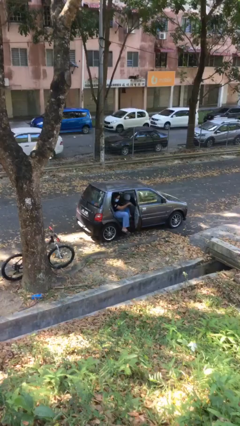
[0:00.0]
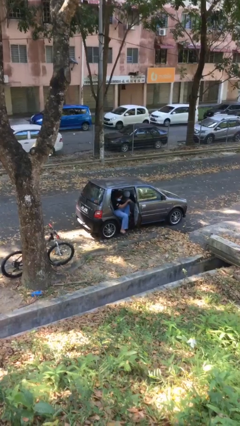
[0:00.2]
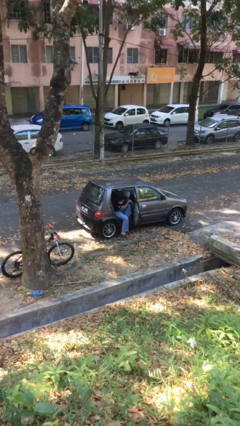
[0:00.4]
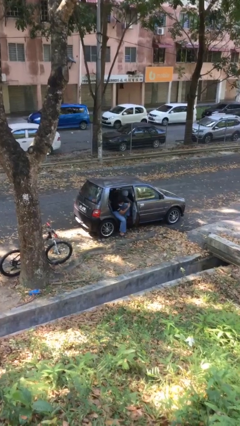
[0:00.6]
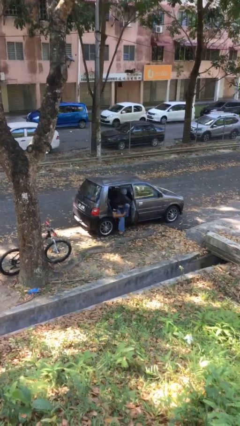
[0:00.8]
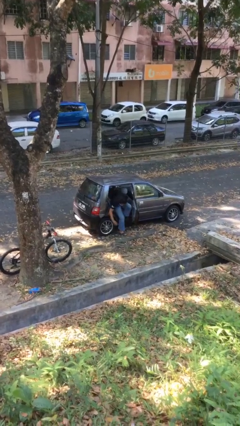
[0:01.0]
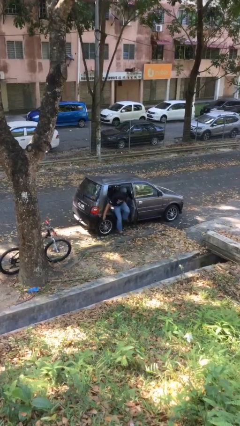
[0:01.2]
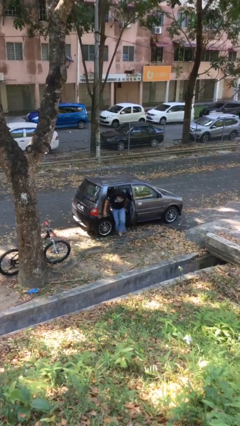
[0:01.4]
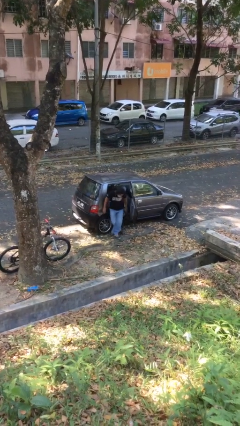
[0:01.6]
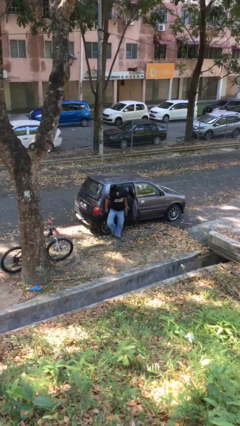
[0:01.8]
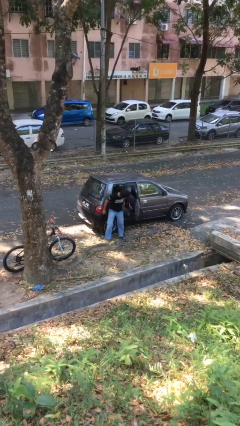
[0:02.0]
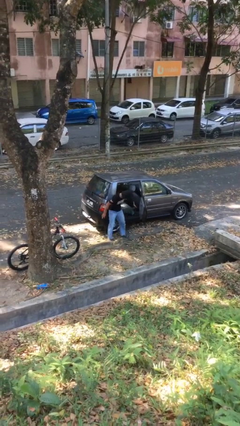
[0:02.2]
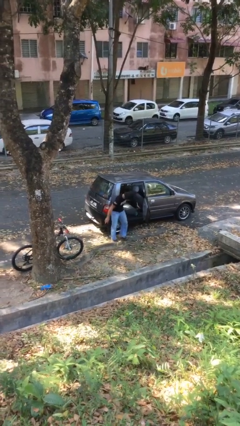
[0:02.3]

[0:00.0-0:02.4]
person exits car

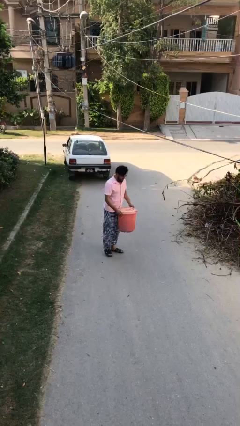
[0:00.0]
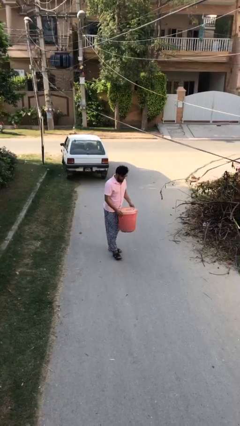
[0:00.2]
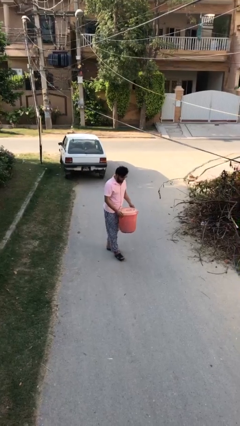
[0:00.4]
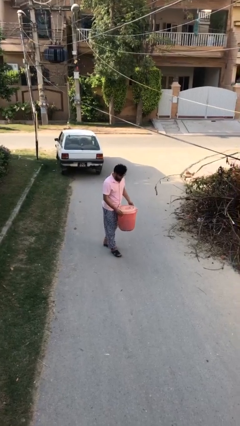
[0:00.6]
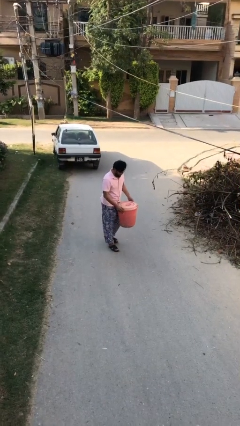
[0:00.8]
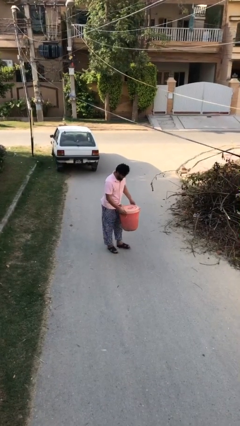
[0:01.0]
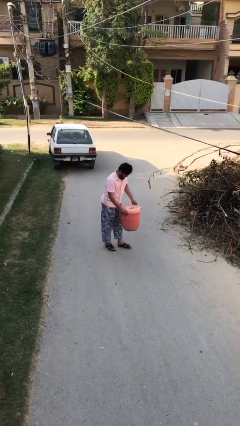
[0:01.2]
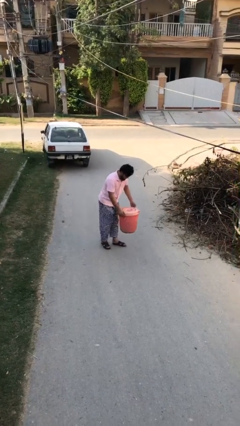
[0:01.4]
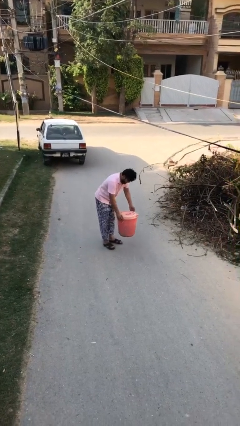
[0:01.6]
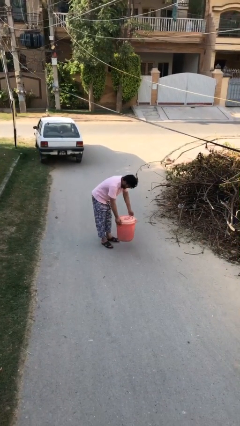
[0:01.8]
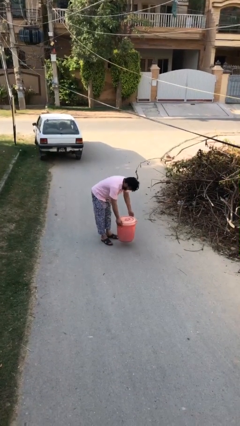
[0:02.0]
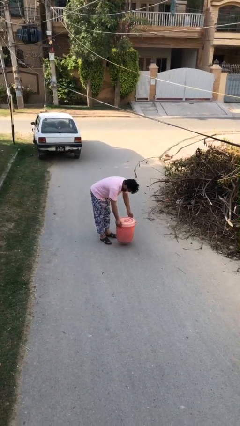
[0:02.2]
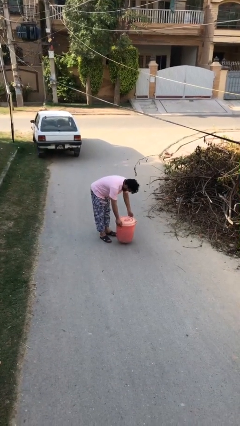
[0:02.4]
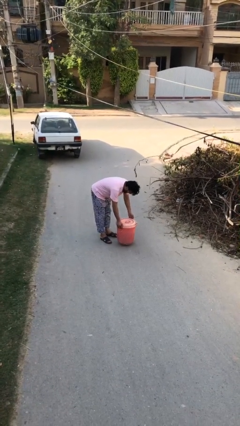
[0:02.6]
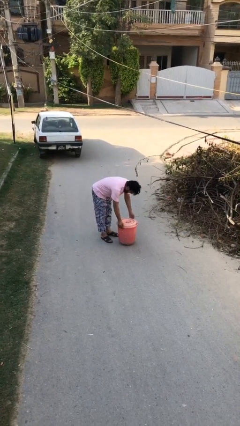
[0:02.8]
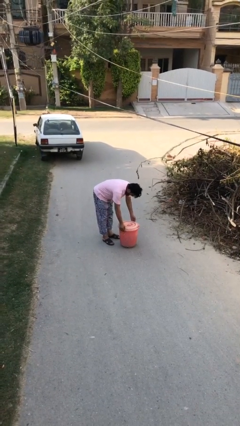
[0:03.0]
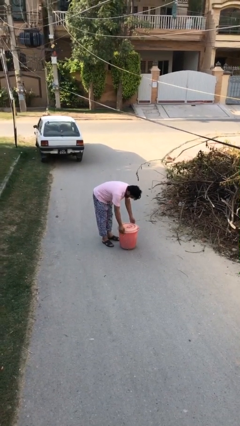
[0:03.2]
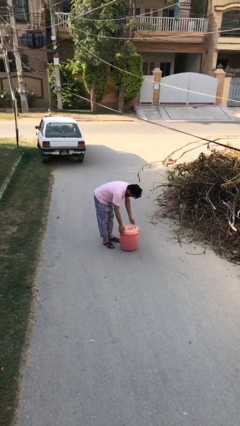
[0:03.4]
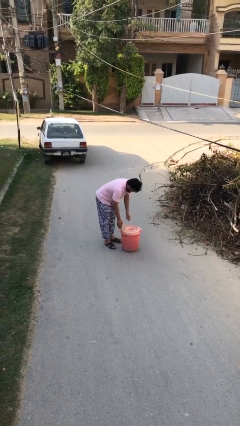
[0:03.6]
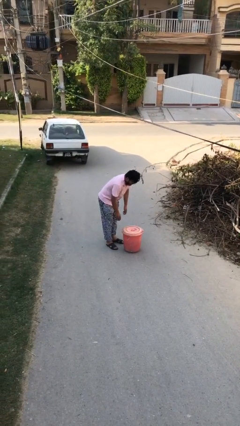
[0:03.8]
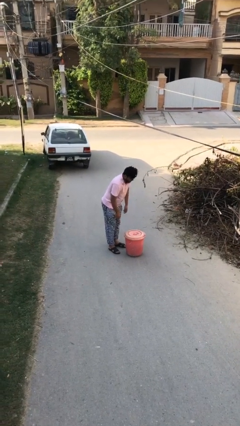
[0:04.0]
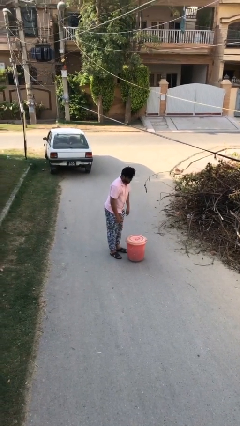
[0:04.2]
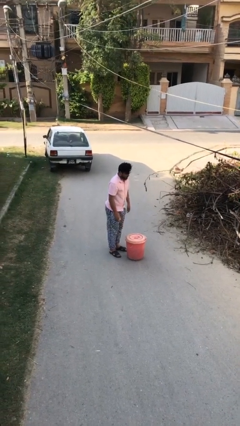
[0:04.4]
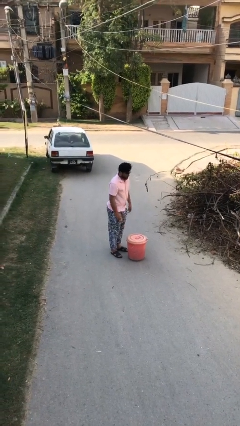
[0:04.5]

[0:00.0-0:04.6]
person puts down object on floor

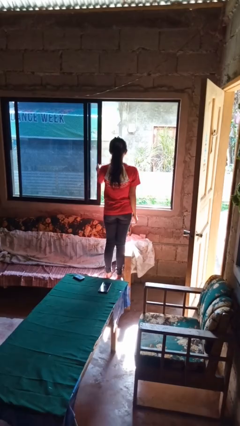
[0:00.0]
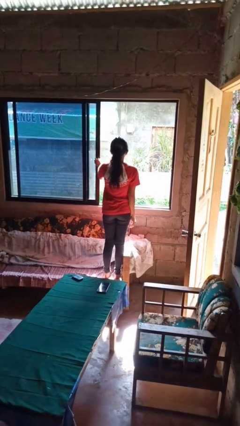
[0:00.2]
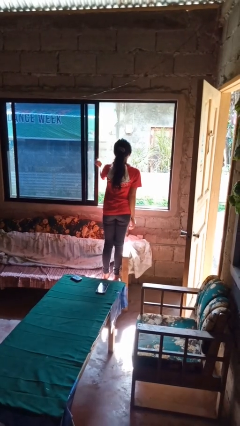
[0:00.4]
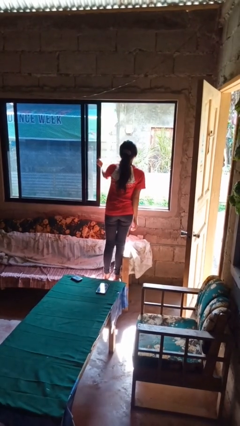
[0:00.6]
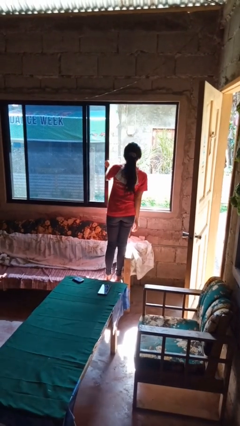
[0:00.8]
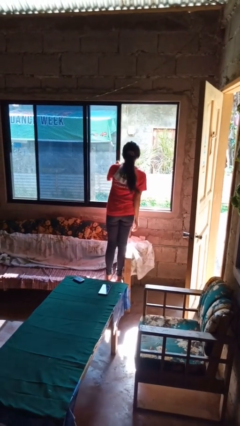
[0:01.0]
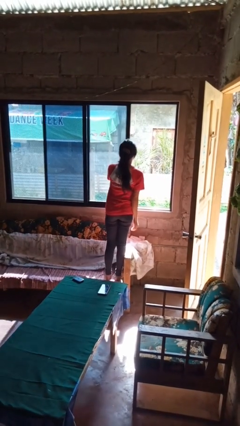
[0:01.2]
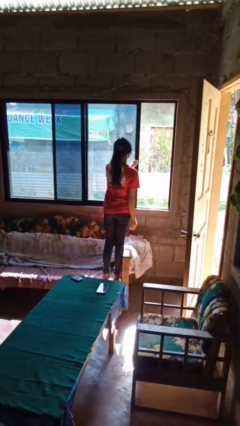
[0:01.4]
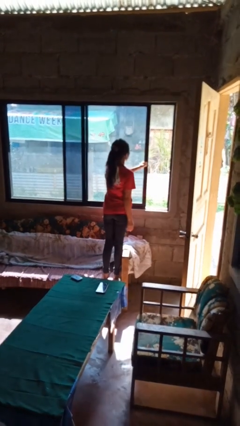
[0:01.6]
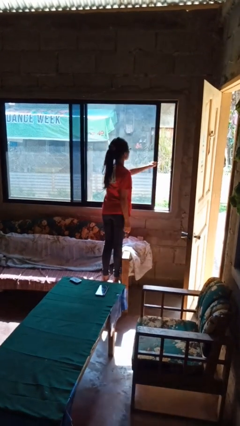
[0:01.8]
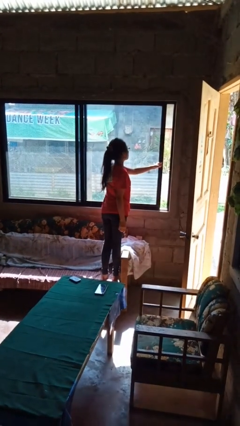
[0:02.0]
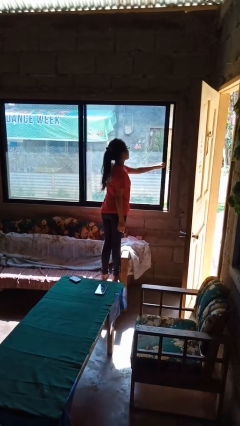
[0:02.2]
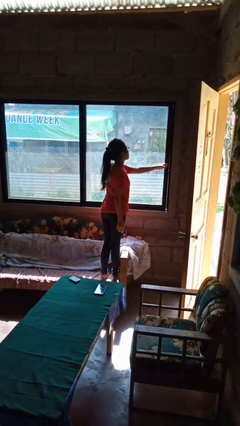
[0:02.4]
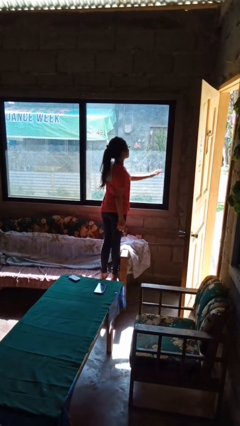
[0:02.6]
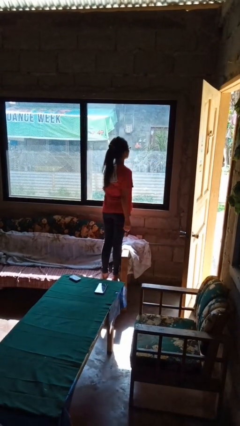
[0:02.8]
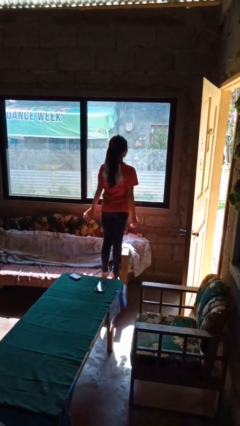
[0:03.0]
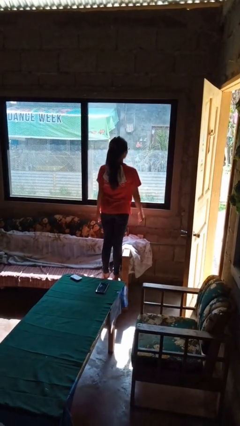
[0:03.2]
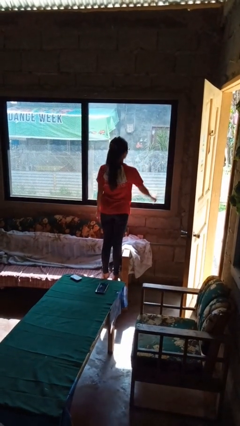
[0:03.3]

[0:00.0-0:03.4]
person closes home window

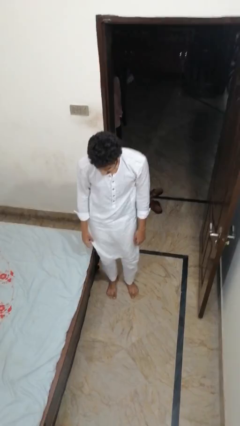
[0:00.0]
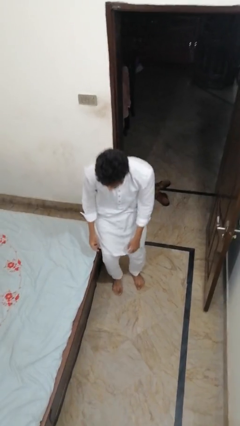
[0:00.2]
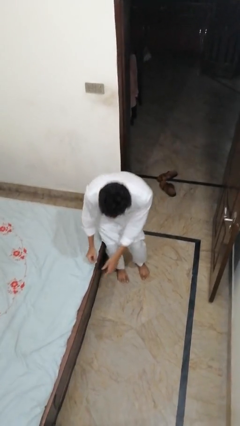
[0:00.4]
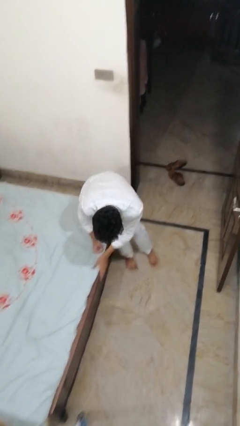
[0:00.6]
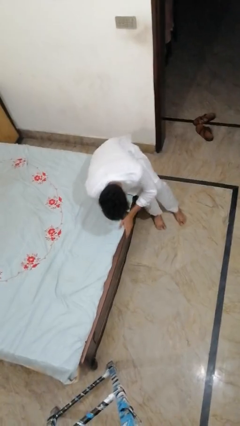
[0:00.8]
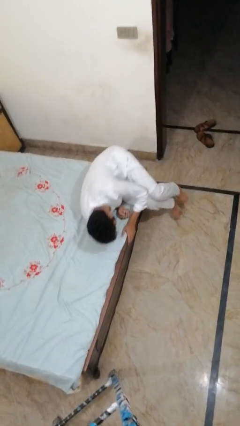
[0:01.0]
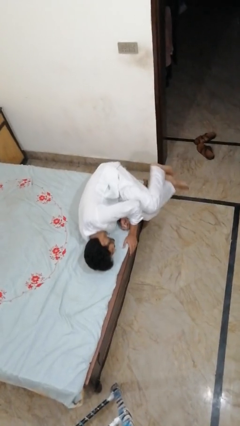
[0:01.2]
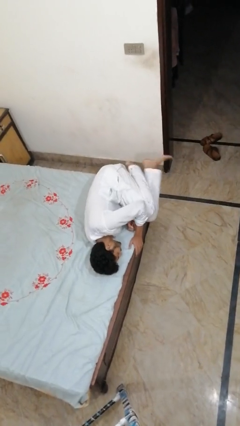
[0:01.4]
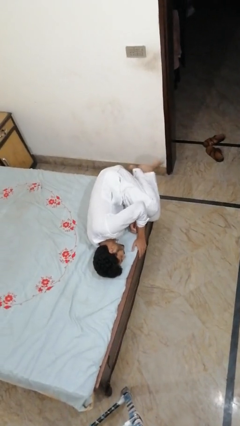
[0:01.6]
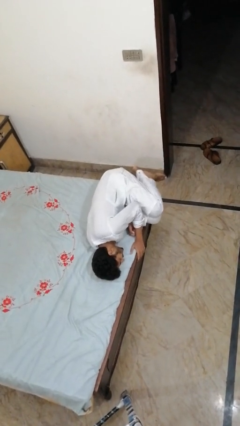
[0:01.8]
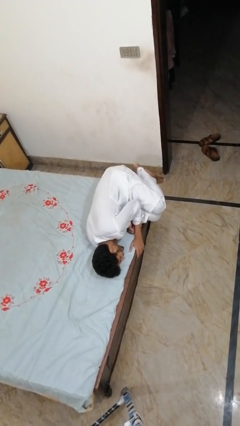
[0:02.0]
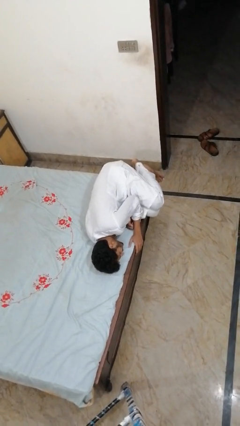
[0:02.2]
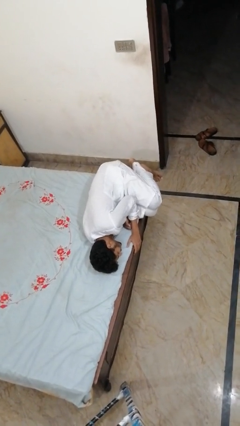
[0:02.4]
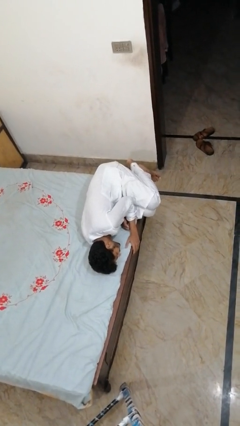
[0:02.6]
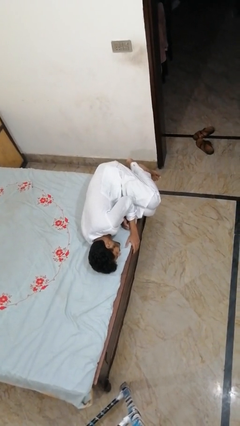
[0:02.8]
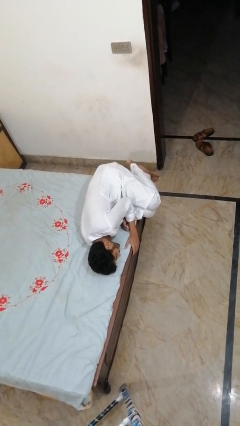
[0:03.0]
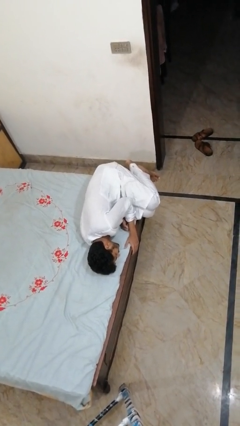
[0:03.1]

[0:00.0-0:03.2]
person lies down on bed

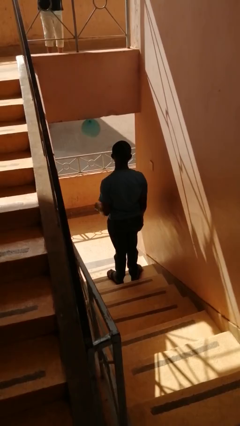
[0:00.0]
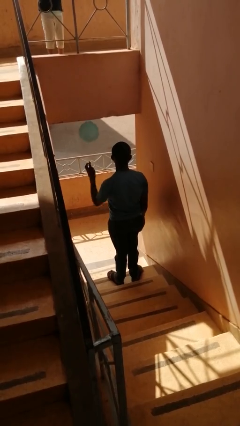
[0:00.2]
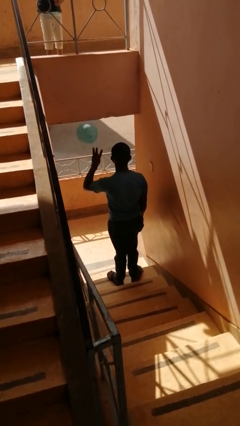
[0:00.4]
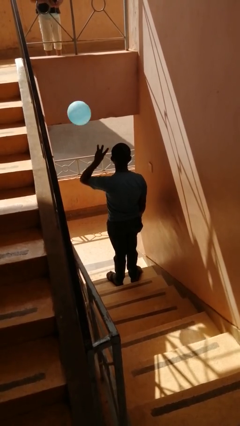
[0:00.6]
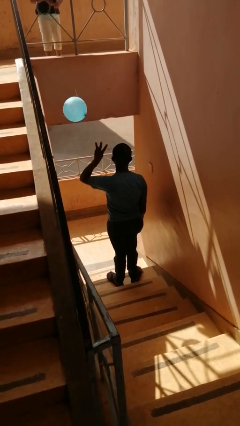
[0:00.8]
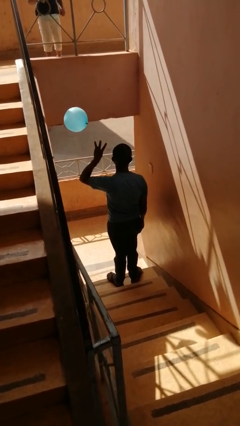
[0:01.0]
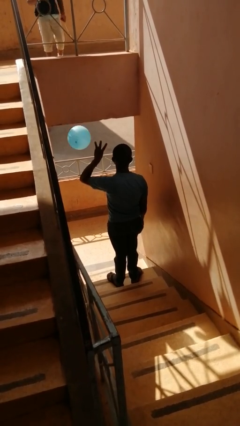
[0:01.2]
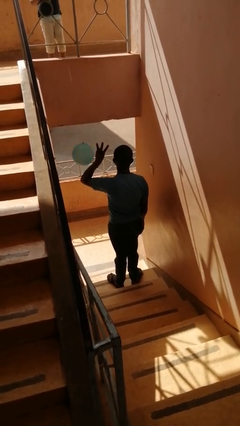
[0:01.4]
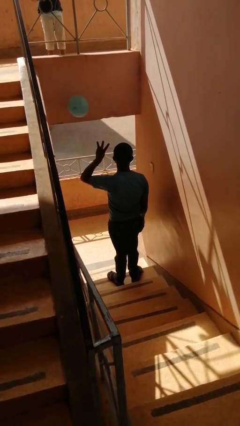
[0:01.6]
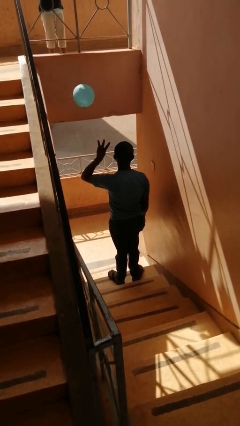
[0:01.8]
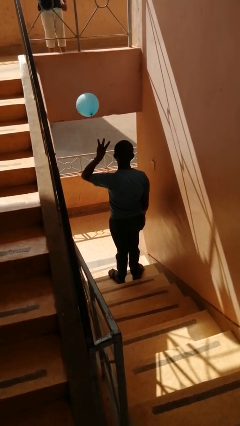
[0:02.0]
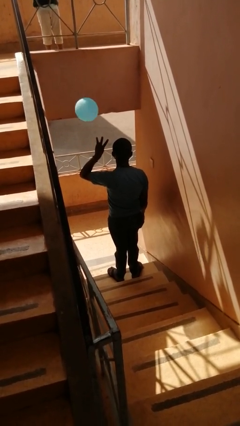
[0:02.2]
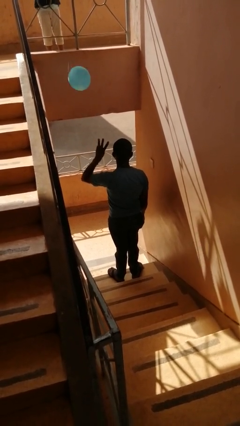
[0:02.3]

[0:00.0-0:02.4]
person gestures number three

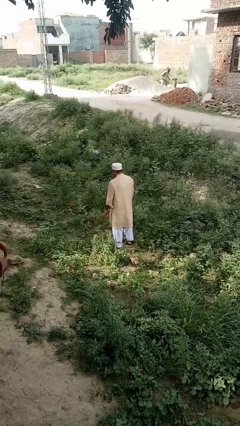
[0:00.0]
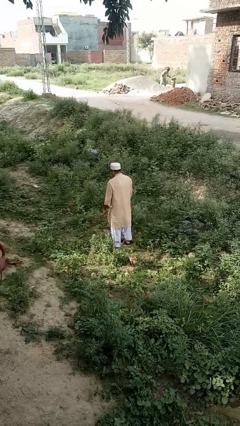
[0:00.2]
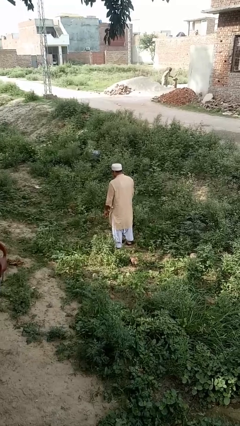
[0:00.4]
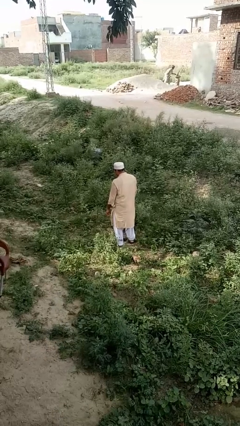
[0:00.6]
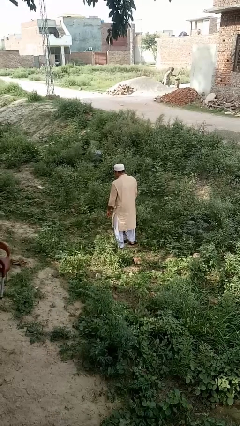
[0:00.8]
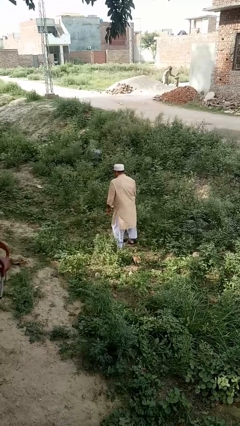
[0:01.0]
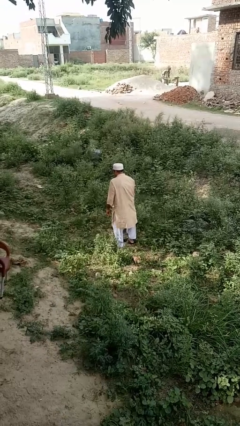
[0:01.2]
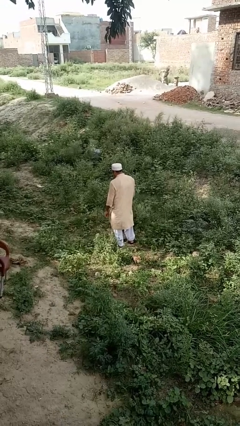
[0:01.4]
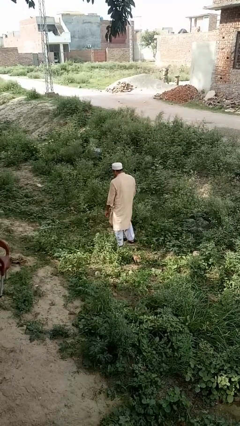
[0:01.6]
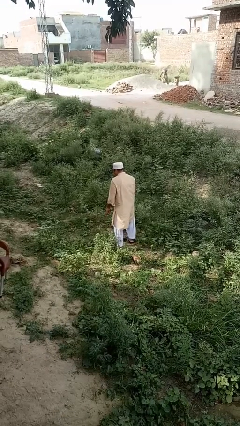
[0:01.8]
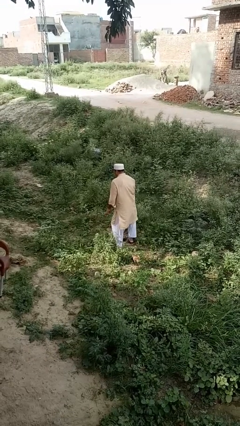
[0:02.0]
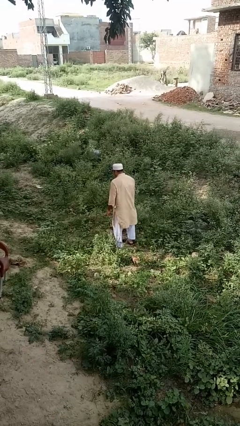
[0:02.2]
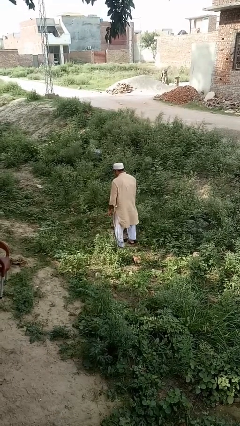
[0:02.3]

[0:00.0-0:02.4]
person wiggles hips
